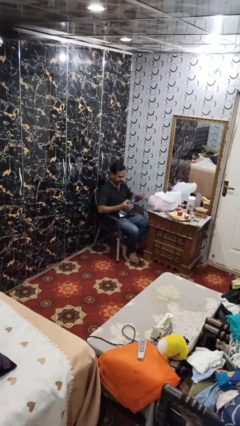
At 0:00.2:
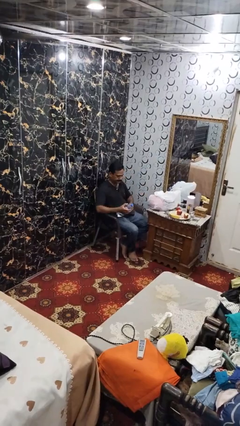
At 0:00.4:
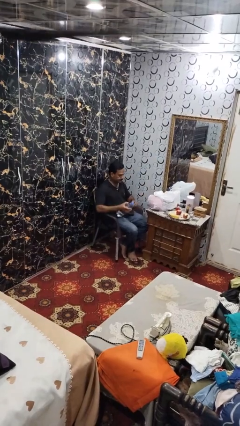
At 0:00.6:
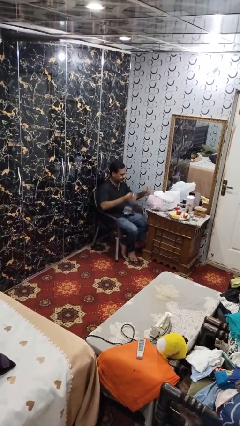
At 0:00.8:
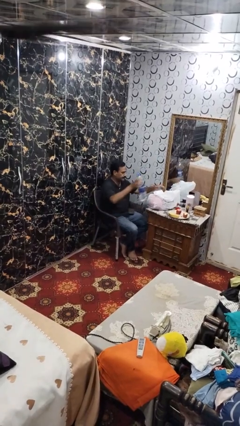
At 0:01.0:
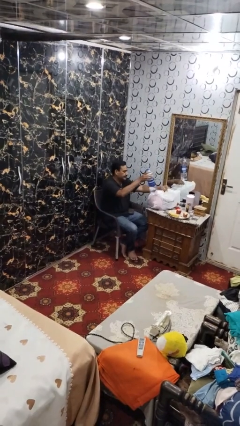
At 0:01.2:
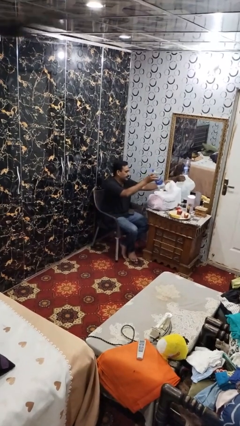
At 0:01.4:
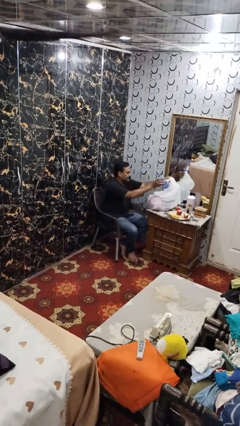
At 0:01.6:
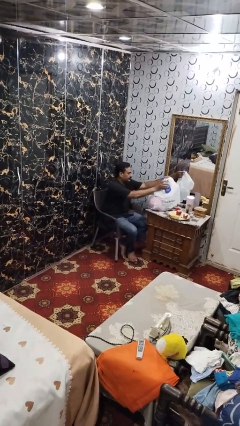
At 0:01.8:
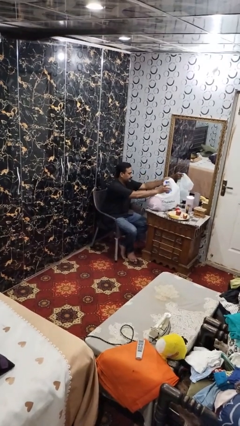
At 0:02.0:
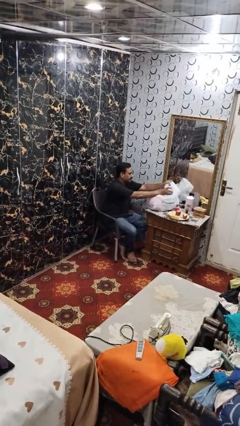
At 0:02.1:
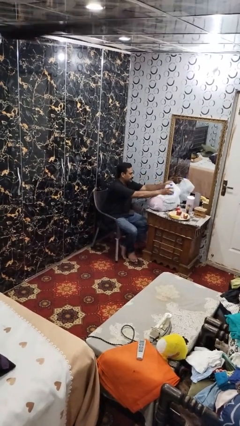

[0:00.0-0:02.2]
person puts object into bag

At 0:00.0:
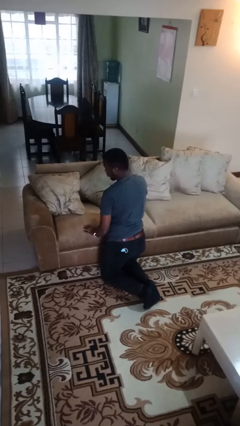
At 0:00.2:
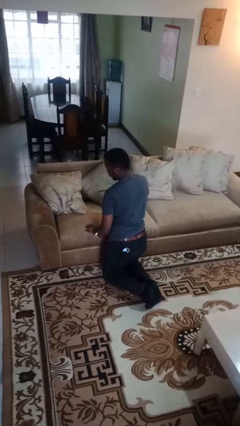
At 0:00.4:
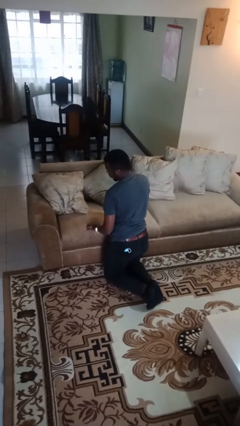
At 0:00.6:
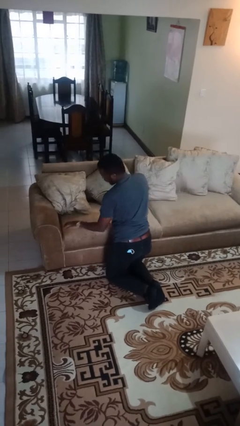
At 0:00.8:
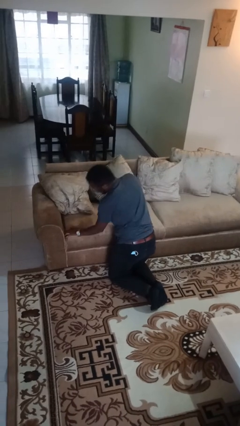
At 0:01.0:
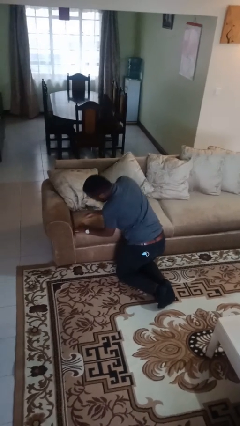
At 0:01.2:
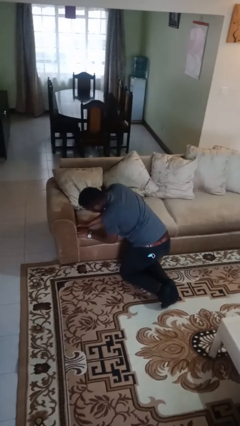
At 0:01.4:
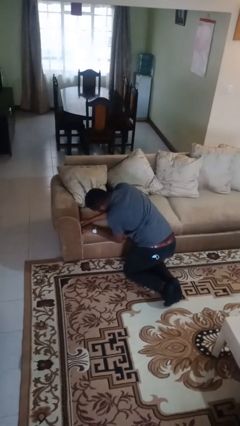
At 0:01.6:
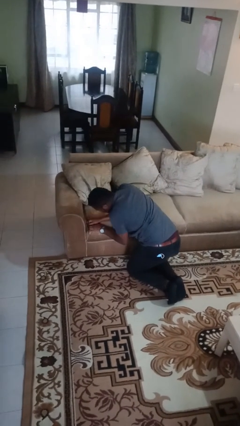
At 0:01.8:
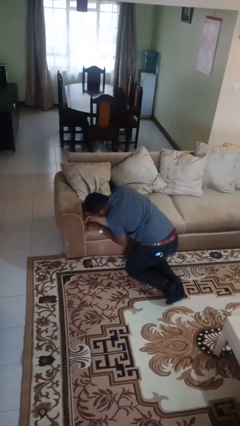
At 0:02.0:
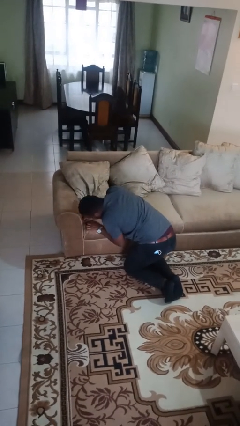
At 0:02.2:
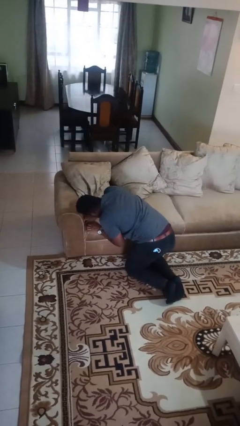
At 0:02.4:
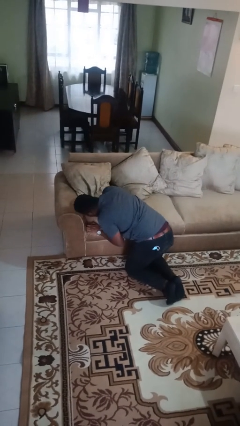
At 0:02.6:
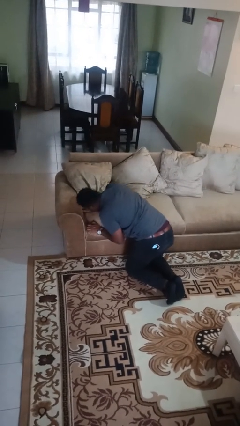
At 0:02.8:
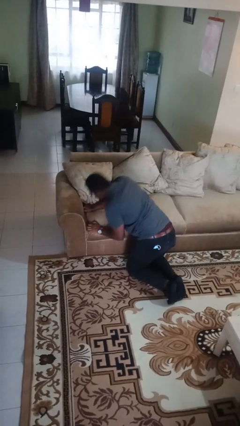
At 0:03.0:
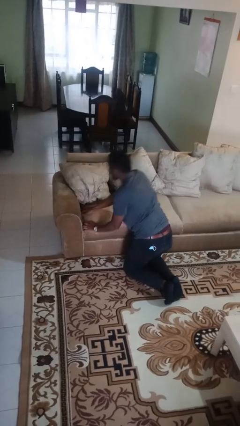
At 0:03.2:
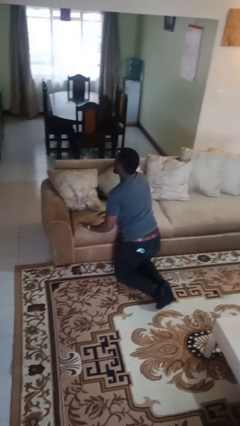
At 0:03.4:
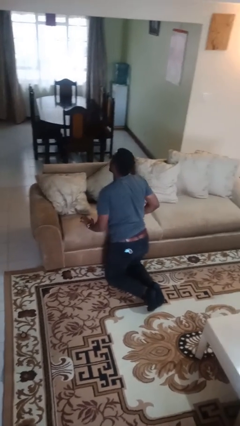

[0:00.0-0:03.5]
person searches in couch

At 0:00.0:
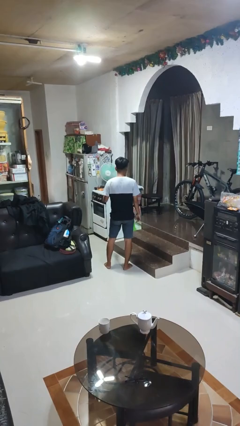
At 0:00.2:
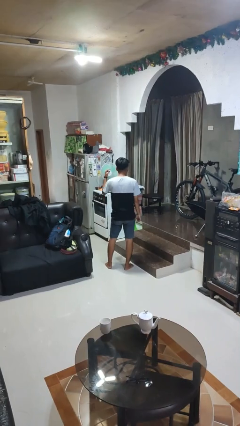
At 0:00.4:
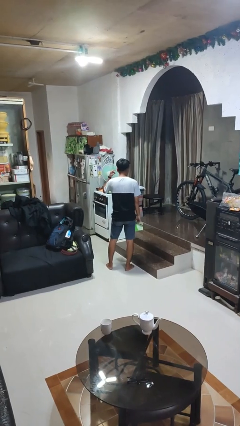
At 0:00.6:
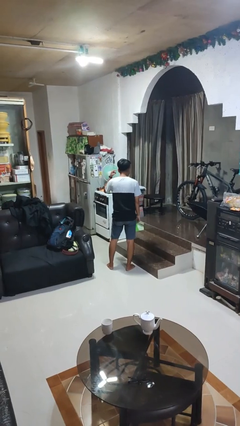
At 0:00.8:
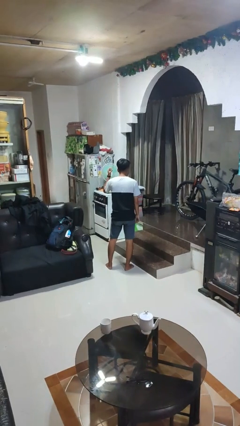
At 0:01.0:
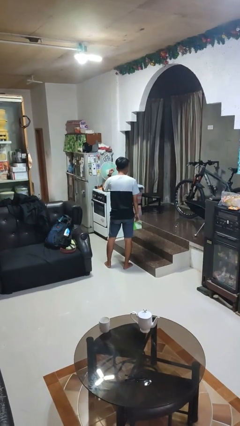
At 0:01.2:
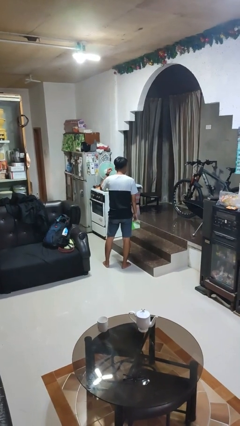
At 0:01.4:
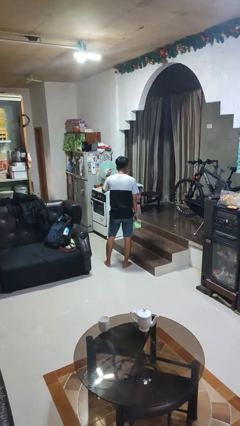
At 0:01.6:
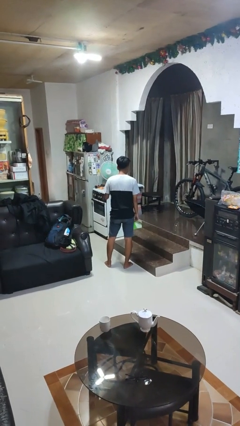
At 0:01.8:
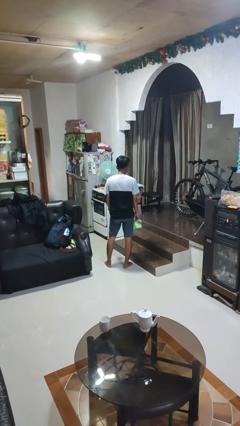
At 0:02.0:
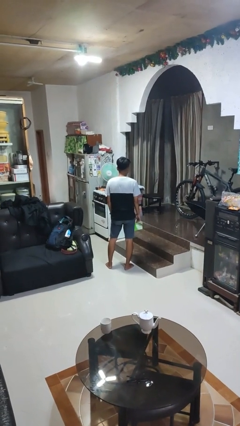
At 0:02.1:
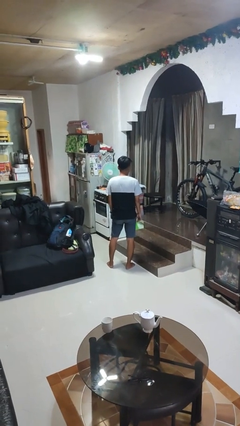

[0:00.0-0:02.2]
person gestures listen closely

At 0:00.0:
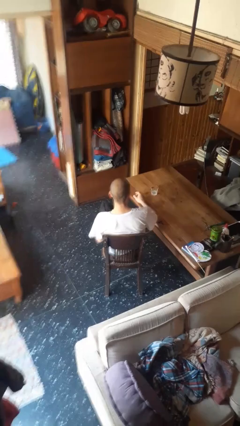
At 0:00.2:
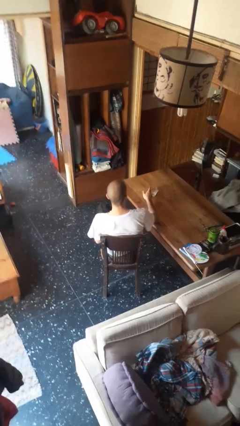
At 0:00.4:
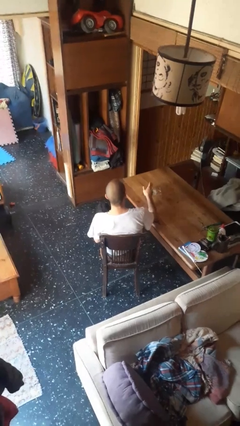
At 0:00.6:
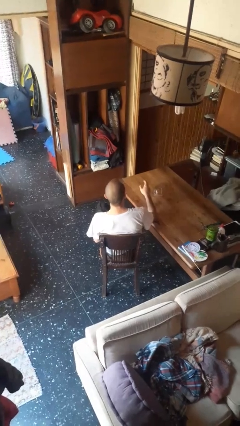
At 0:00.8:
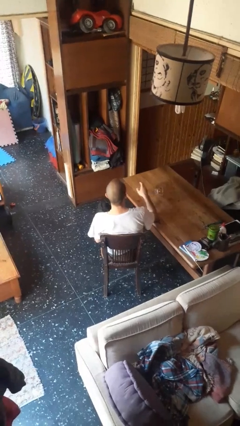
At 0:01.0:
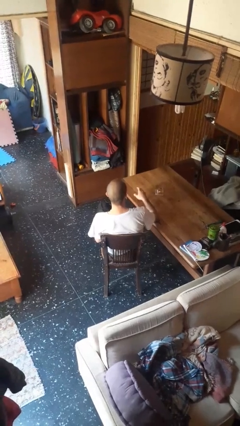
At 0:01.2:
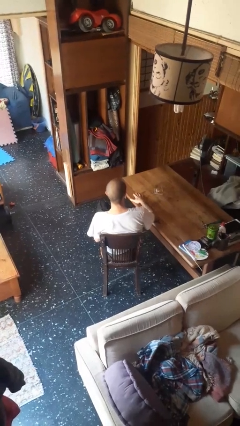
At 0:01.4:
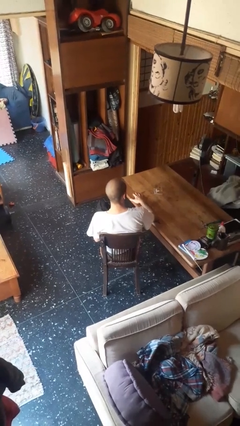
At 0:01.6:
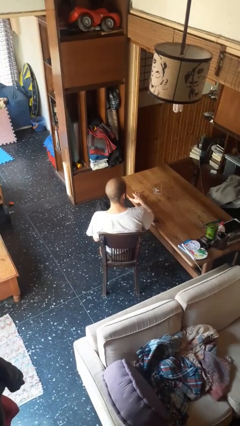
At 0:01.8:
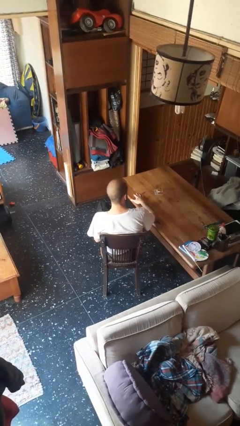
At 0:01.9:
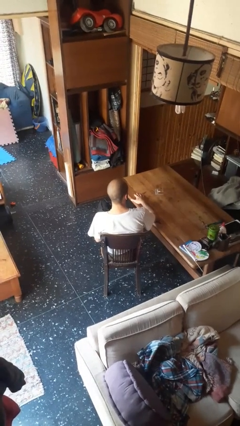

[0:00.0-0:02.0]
person knocks over glass

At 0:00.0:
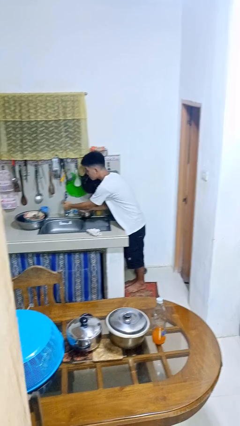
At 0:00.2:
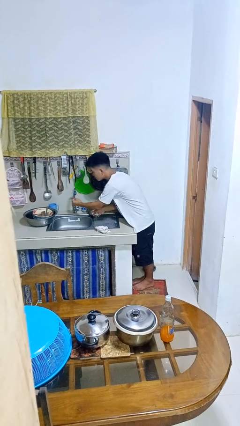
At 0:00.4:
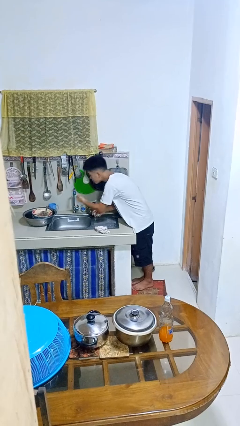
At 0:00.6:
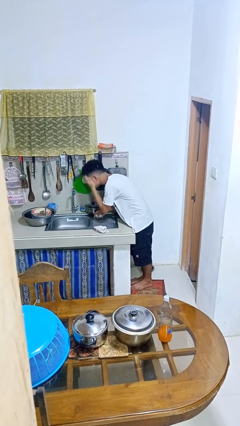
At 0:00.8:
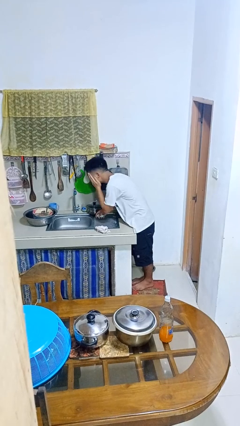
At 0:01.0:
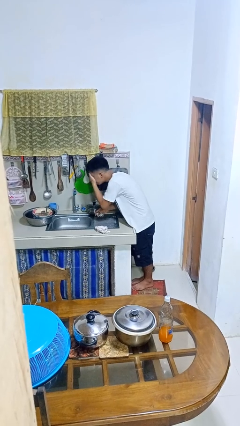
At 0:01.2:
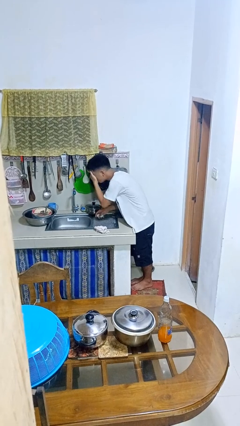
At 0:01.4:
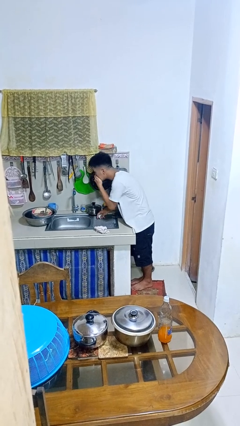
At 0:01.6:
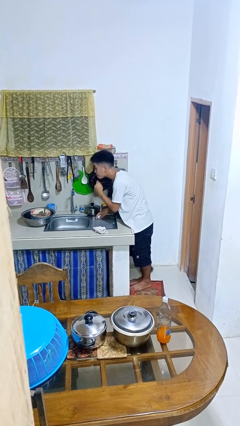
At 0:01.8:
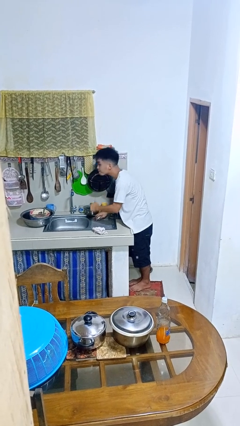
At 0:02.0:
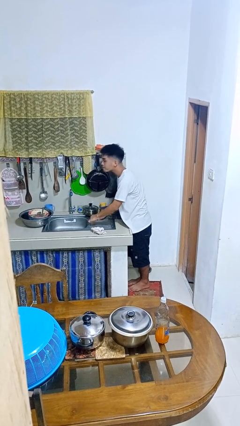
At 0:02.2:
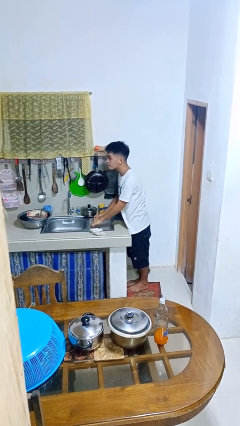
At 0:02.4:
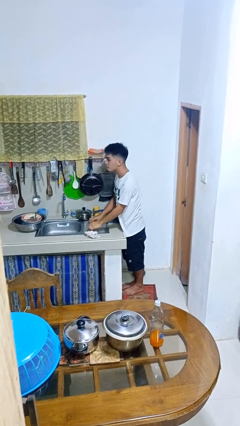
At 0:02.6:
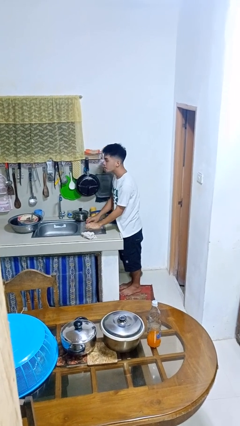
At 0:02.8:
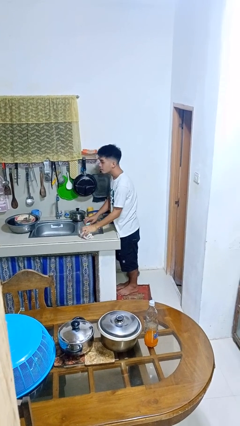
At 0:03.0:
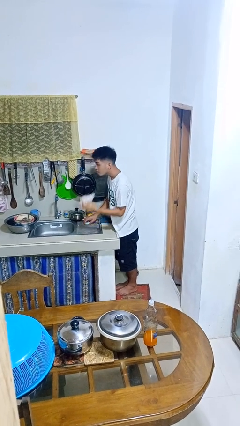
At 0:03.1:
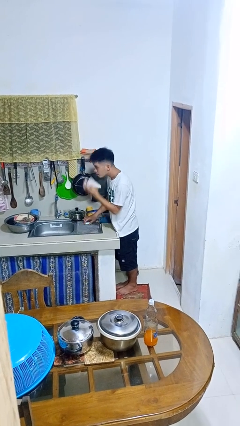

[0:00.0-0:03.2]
person washes face

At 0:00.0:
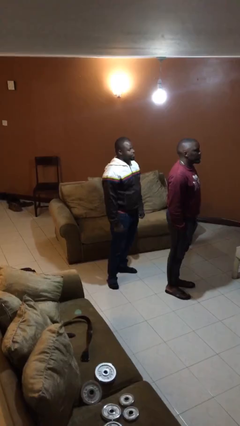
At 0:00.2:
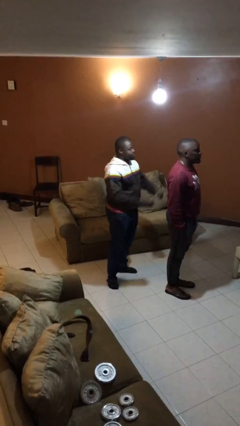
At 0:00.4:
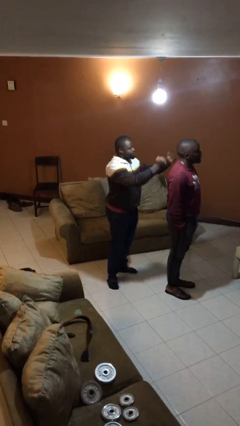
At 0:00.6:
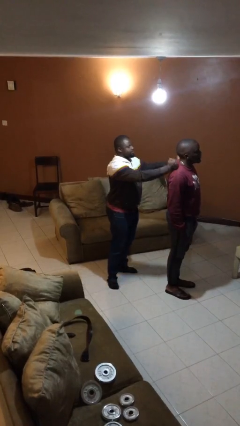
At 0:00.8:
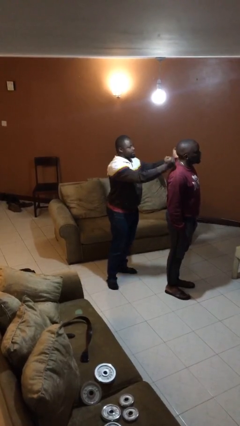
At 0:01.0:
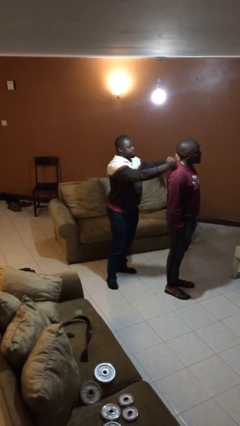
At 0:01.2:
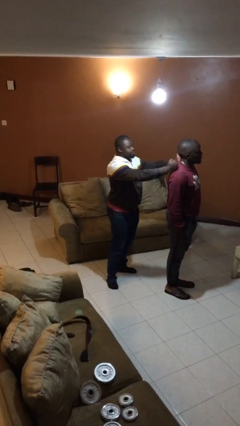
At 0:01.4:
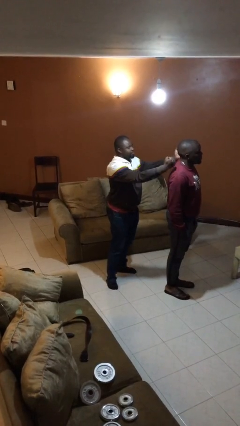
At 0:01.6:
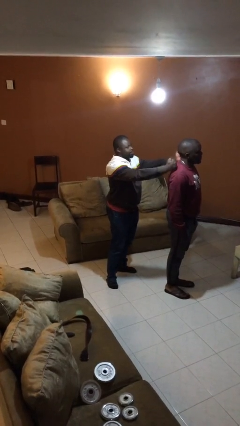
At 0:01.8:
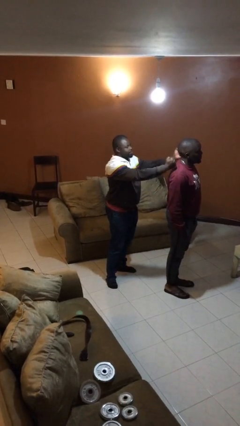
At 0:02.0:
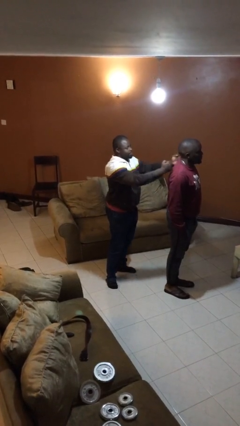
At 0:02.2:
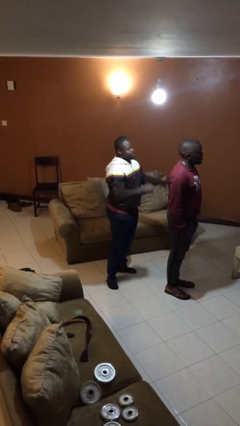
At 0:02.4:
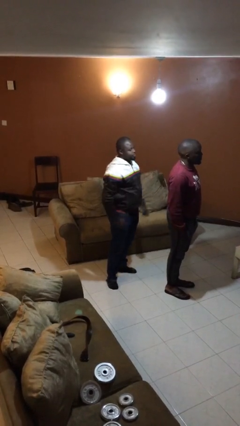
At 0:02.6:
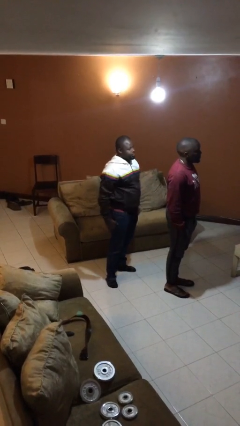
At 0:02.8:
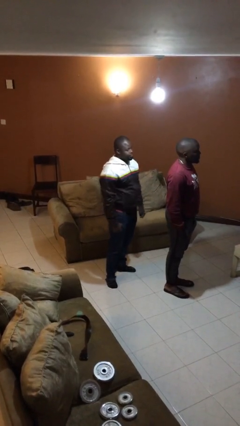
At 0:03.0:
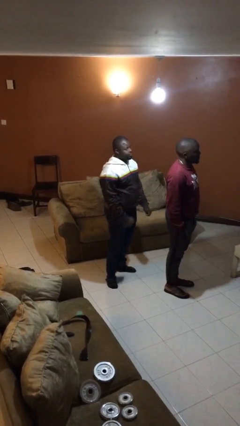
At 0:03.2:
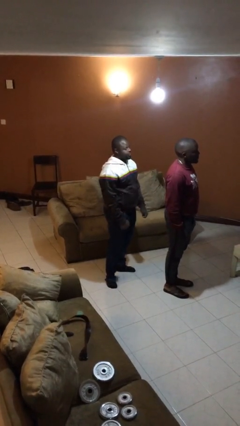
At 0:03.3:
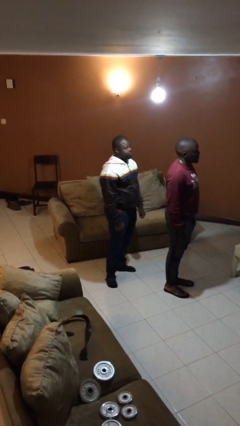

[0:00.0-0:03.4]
person pounds shoulders of person

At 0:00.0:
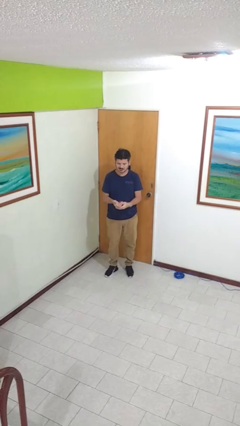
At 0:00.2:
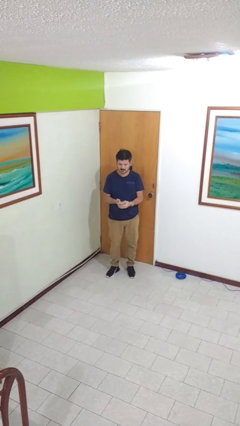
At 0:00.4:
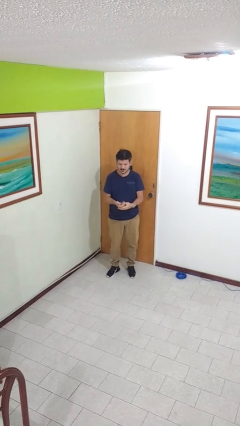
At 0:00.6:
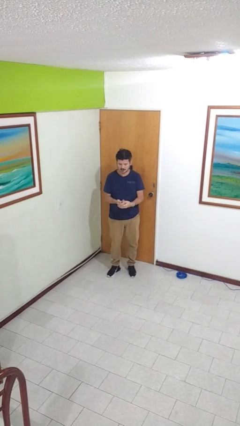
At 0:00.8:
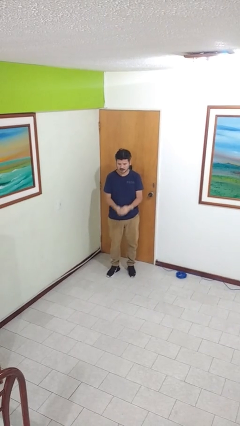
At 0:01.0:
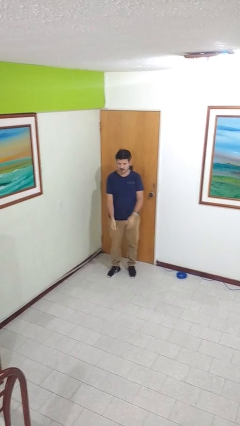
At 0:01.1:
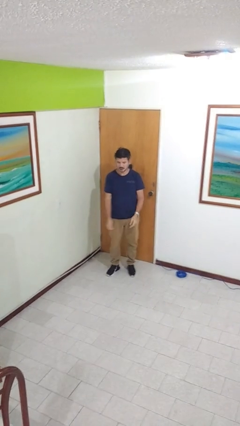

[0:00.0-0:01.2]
person cracks knuckles
